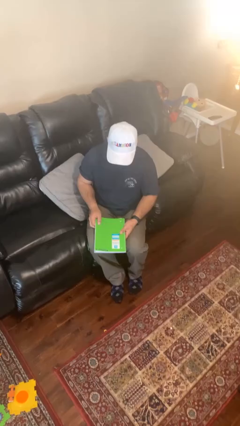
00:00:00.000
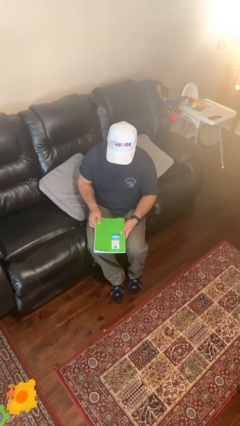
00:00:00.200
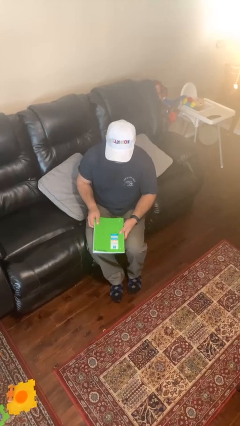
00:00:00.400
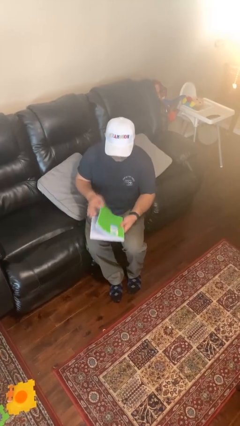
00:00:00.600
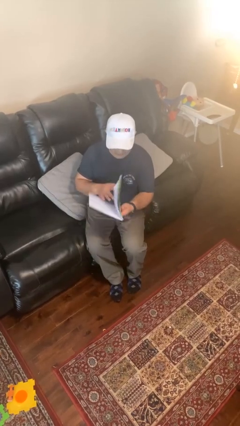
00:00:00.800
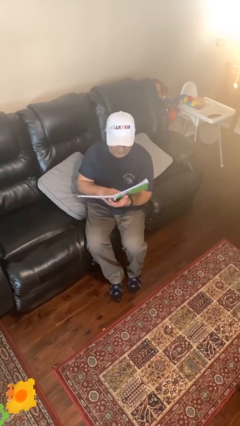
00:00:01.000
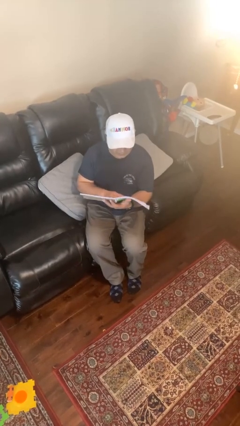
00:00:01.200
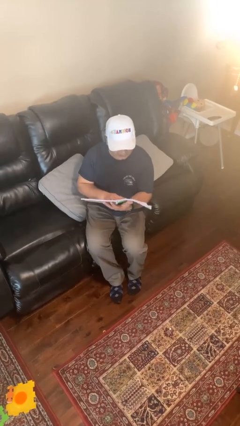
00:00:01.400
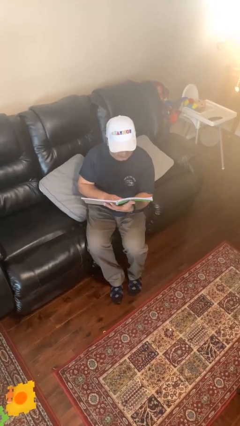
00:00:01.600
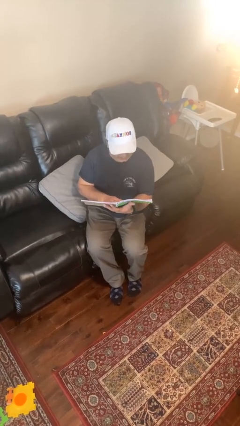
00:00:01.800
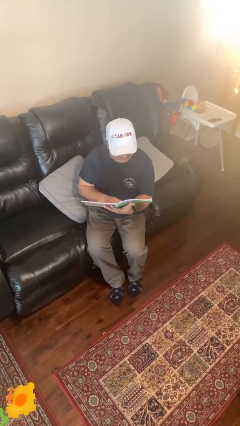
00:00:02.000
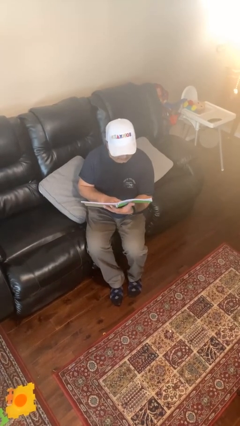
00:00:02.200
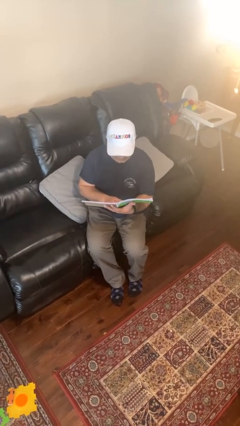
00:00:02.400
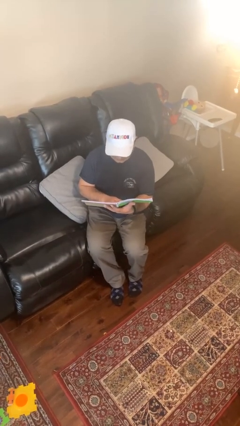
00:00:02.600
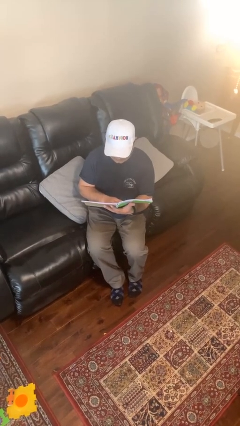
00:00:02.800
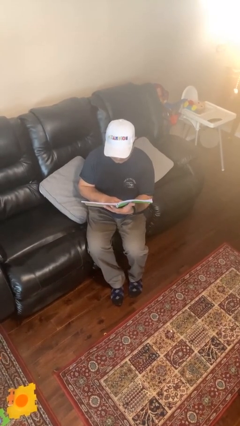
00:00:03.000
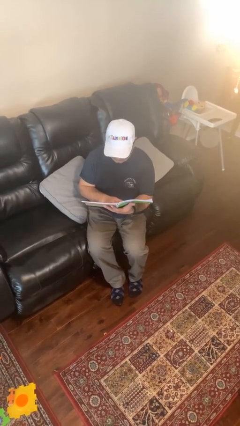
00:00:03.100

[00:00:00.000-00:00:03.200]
person reads document

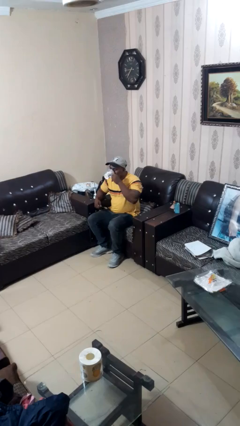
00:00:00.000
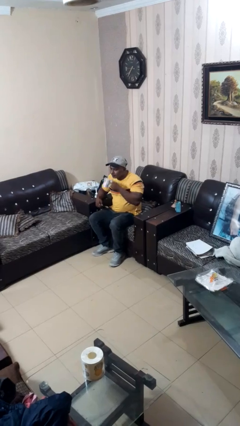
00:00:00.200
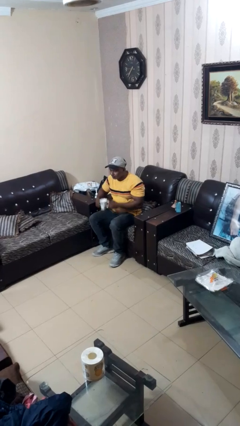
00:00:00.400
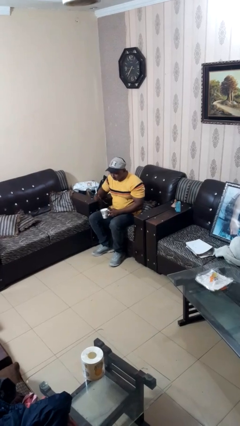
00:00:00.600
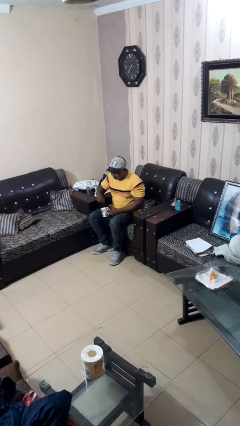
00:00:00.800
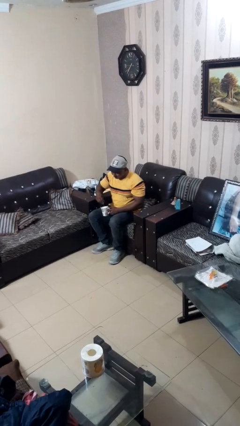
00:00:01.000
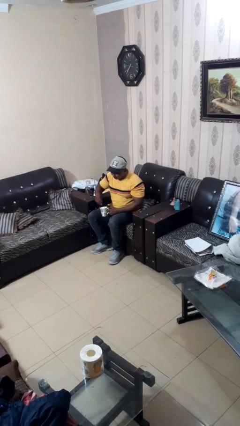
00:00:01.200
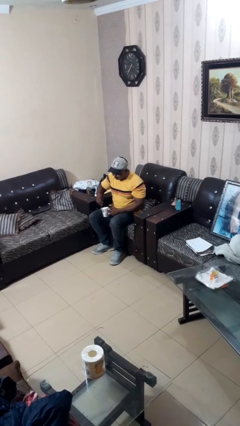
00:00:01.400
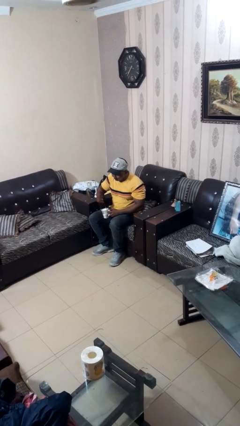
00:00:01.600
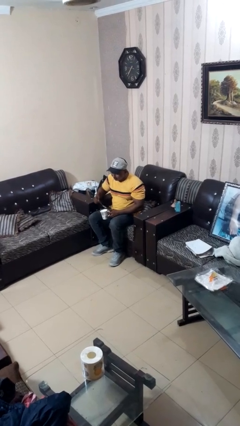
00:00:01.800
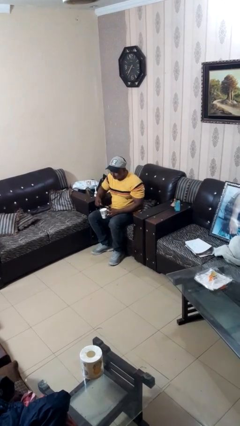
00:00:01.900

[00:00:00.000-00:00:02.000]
person stirs mug

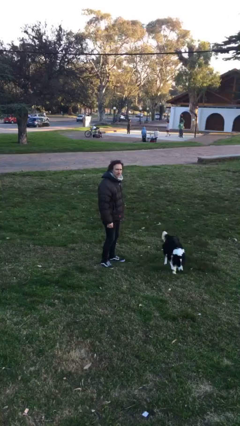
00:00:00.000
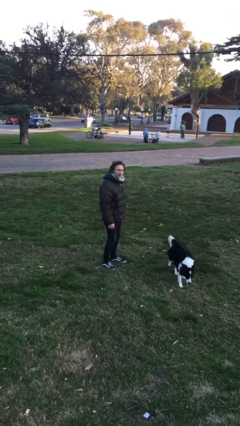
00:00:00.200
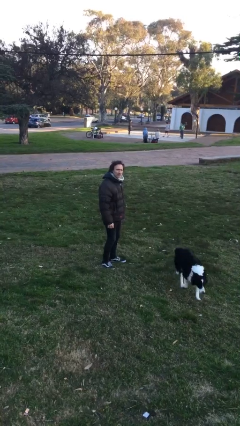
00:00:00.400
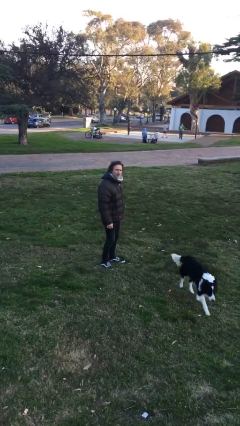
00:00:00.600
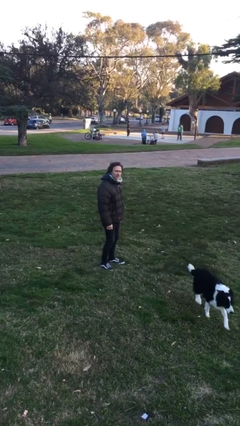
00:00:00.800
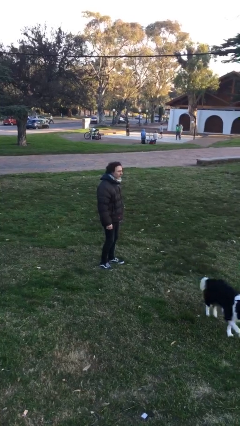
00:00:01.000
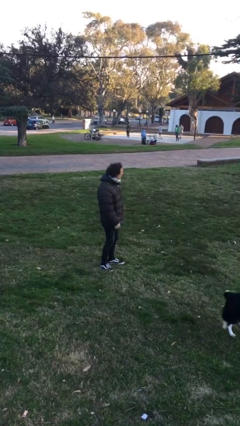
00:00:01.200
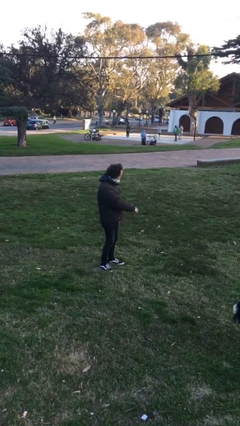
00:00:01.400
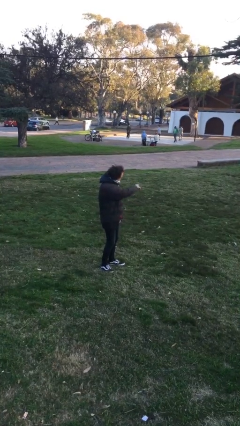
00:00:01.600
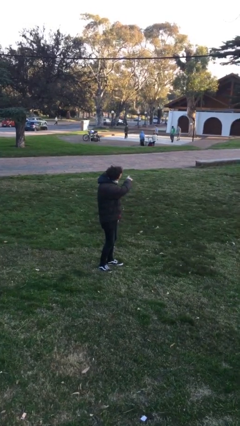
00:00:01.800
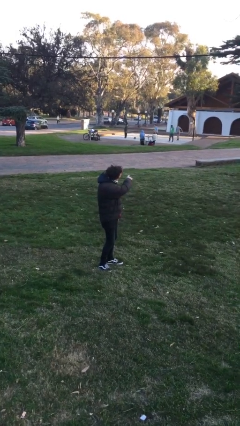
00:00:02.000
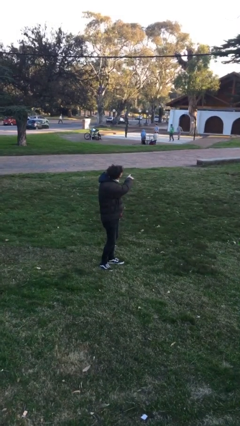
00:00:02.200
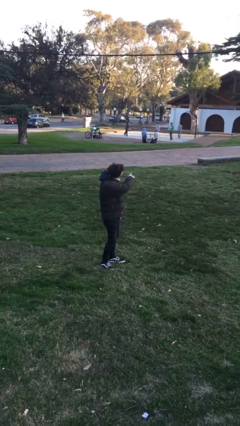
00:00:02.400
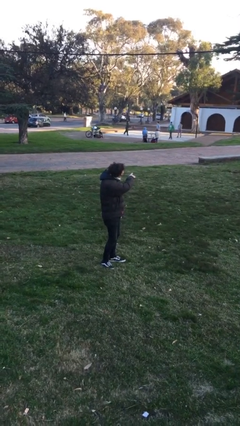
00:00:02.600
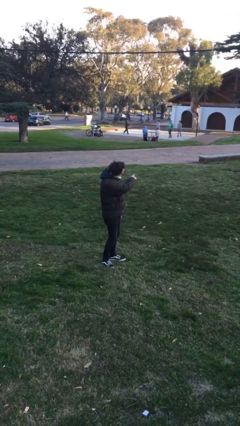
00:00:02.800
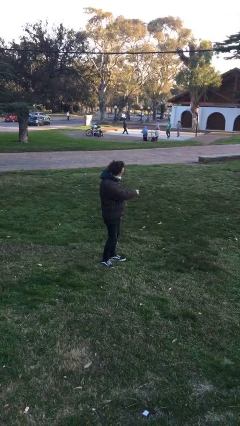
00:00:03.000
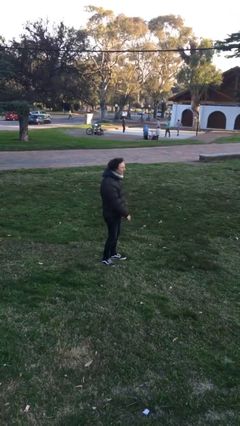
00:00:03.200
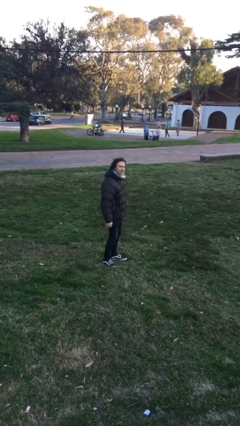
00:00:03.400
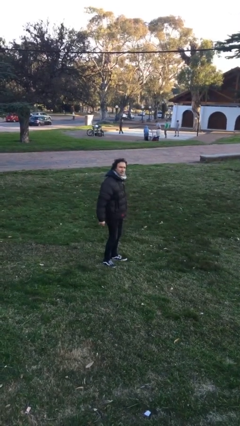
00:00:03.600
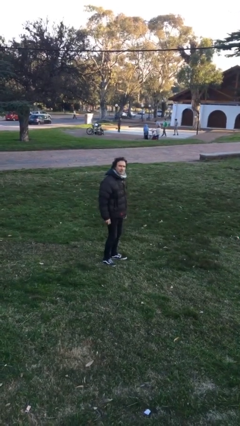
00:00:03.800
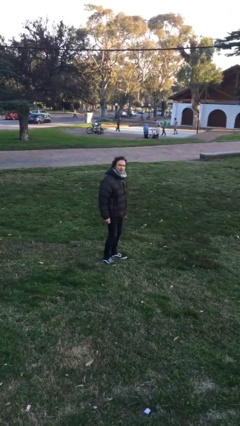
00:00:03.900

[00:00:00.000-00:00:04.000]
person points at person

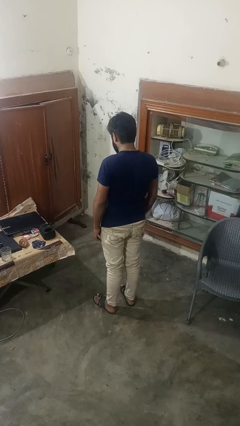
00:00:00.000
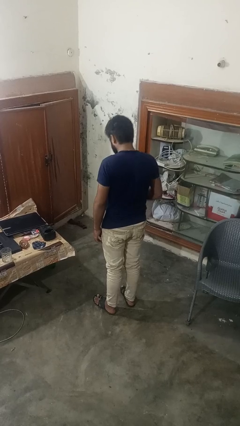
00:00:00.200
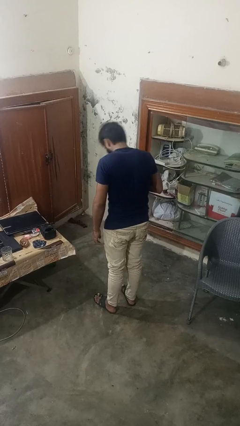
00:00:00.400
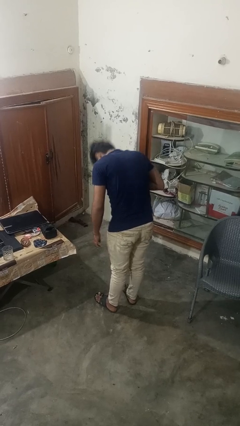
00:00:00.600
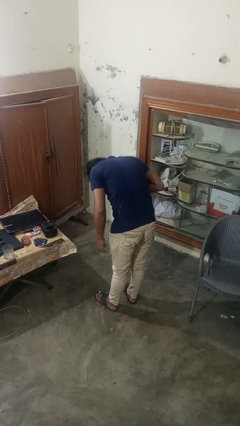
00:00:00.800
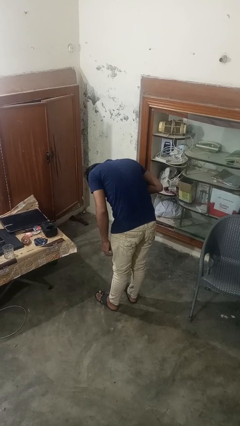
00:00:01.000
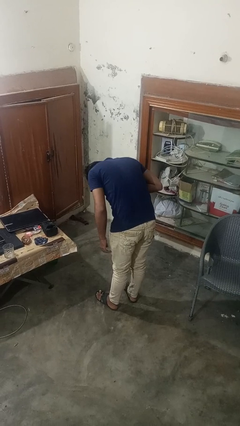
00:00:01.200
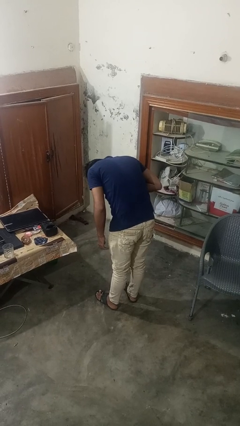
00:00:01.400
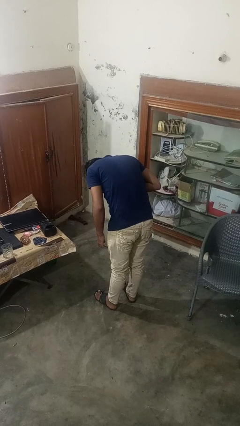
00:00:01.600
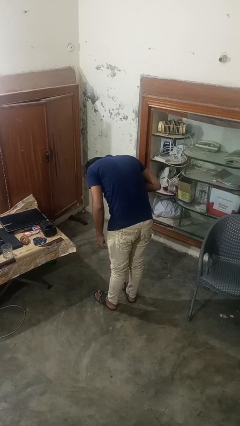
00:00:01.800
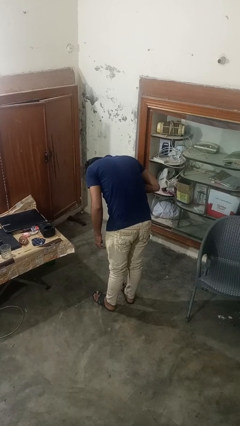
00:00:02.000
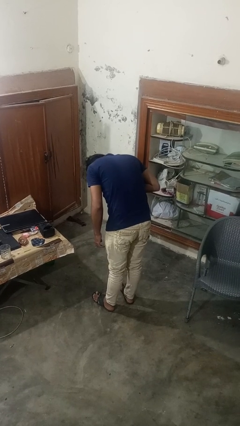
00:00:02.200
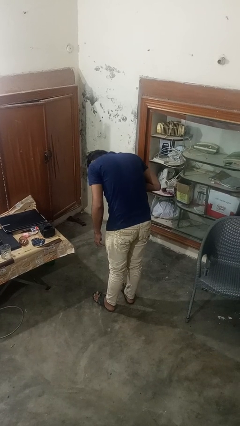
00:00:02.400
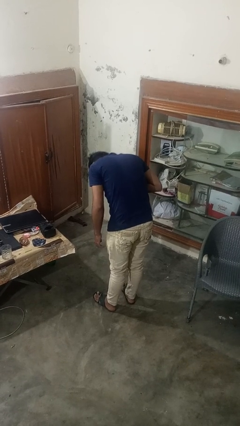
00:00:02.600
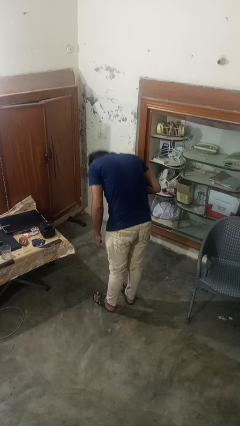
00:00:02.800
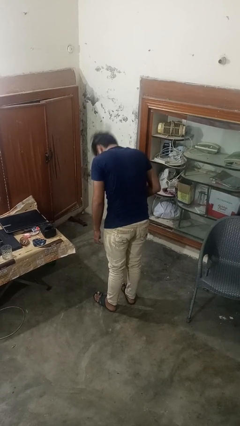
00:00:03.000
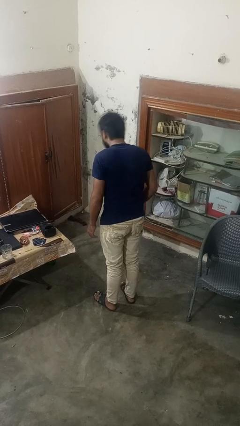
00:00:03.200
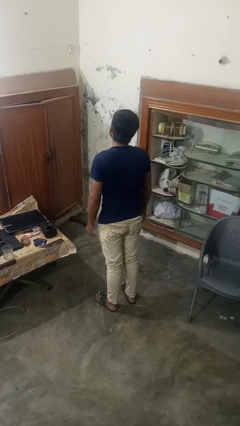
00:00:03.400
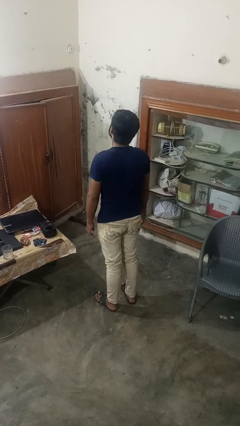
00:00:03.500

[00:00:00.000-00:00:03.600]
person bows

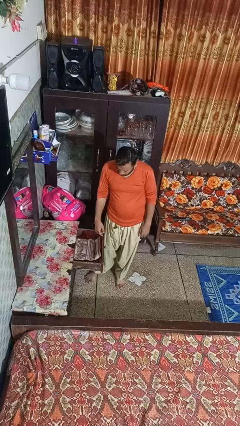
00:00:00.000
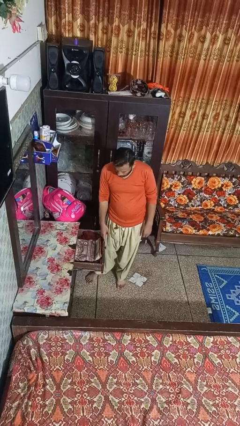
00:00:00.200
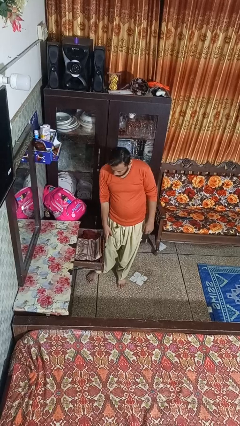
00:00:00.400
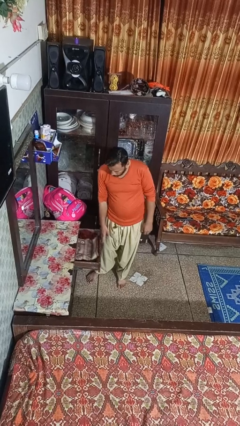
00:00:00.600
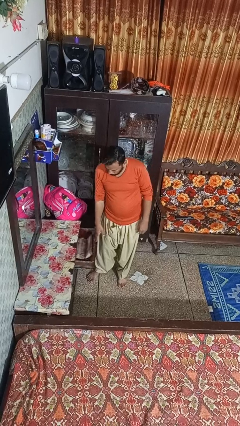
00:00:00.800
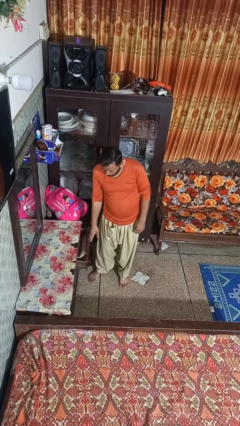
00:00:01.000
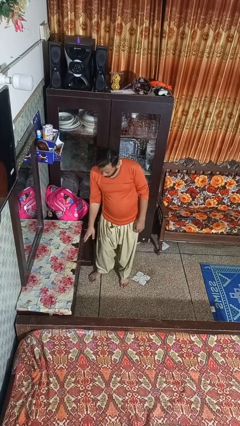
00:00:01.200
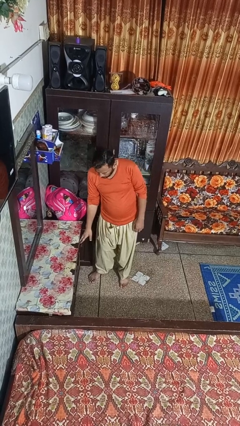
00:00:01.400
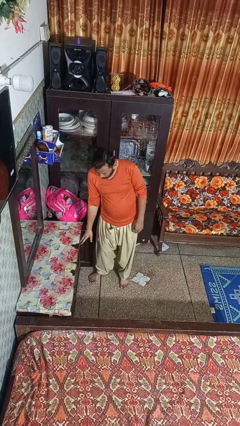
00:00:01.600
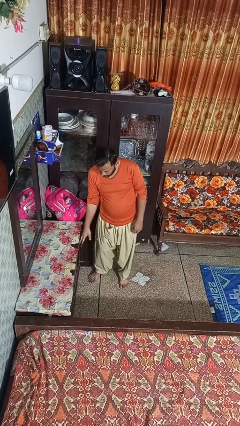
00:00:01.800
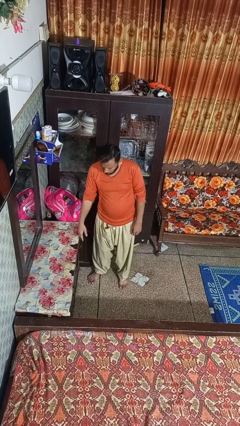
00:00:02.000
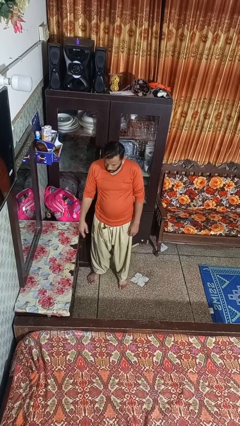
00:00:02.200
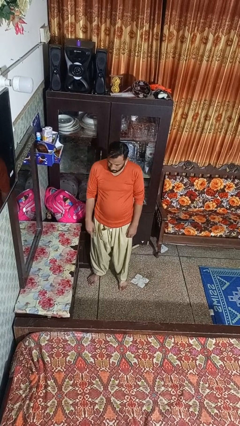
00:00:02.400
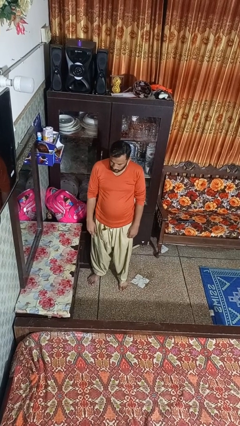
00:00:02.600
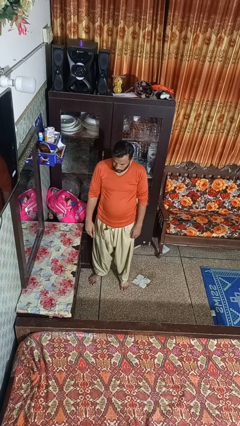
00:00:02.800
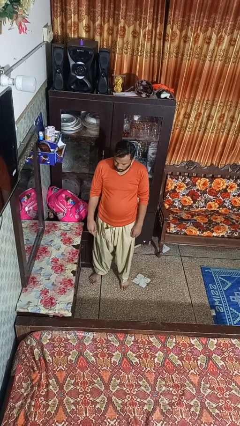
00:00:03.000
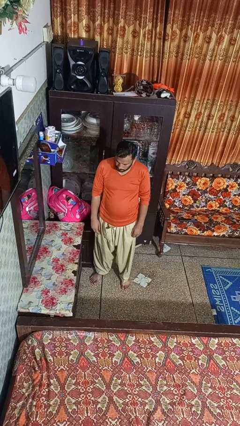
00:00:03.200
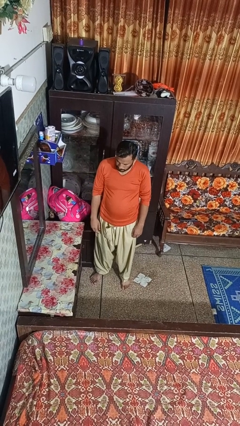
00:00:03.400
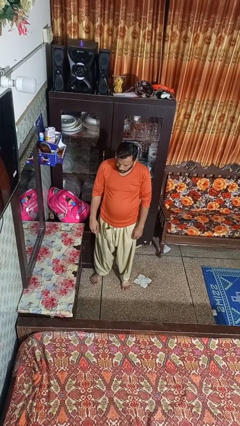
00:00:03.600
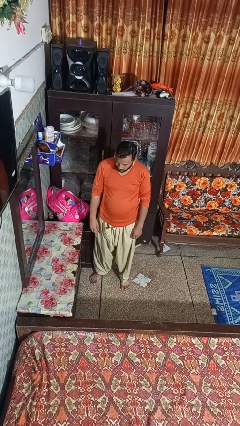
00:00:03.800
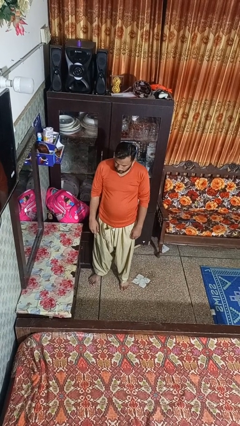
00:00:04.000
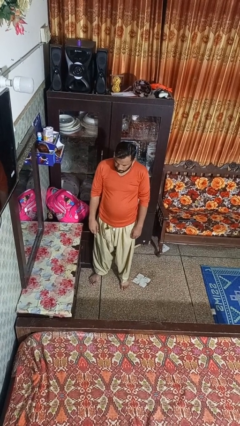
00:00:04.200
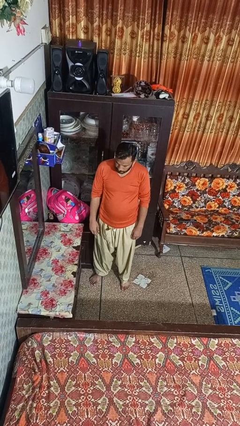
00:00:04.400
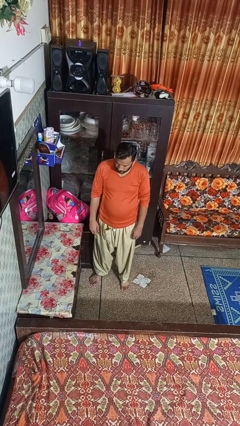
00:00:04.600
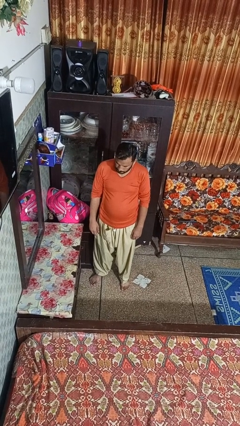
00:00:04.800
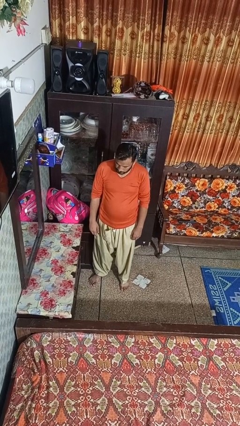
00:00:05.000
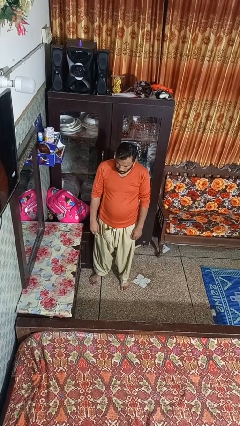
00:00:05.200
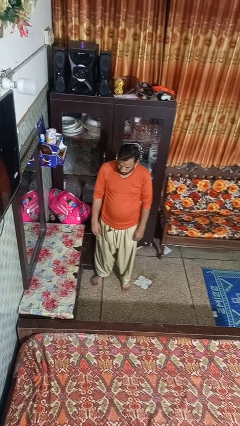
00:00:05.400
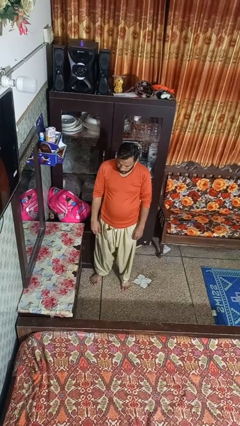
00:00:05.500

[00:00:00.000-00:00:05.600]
person closes dresser drawer
